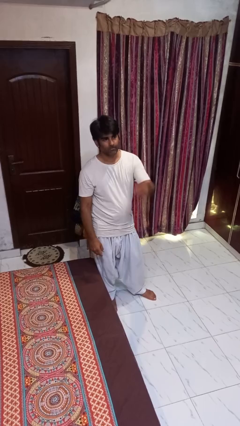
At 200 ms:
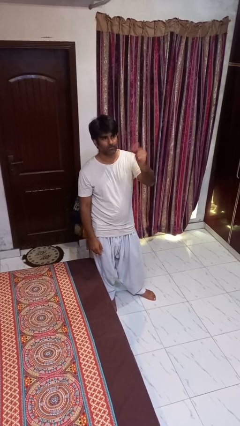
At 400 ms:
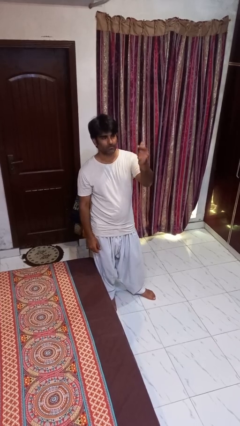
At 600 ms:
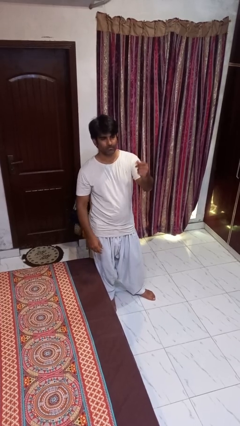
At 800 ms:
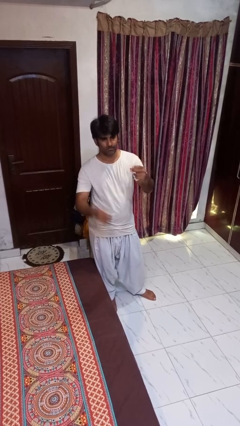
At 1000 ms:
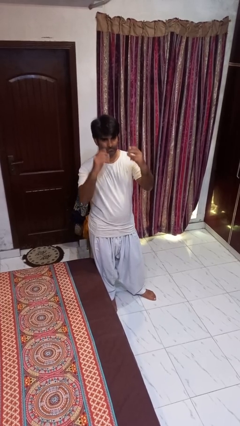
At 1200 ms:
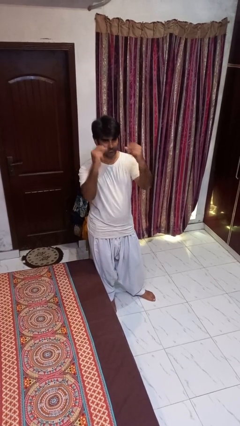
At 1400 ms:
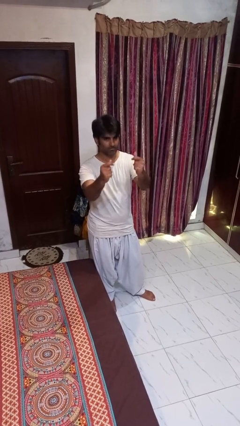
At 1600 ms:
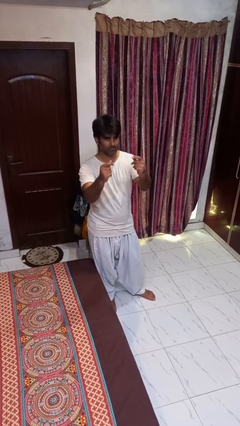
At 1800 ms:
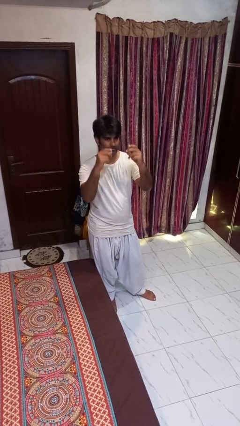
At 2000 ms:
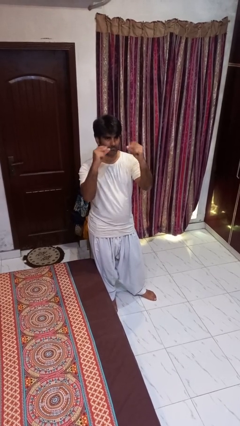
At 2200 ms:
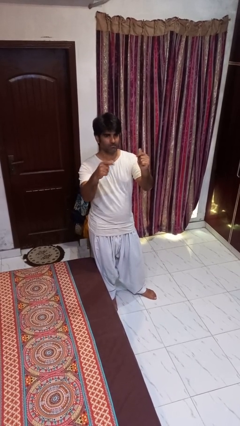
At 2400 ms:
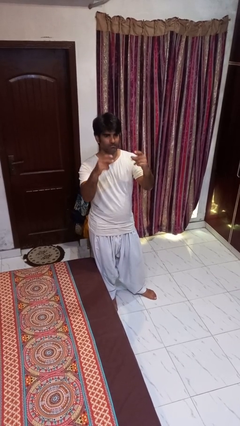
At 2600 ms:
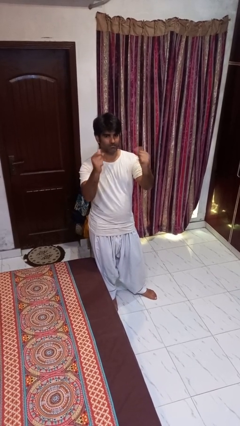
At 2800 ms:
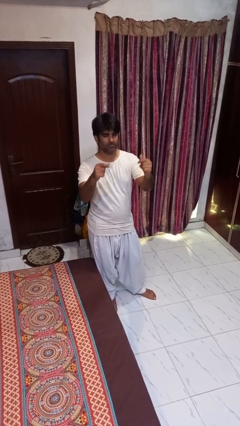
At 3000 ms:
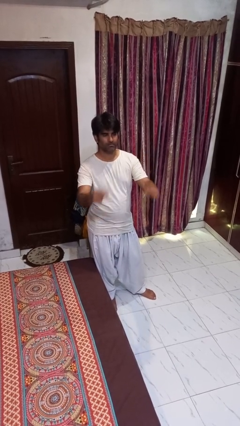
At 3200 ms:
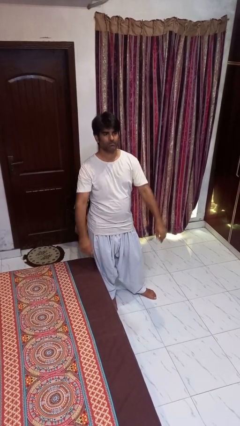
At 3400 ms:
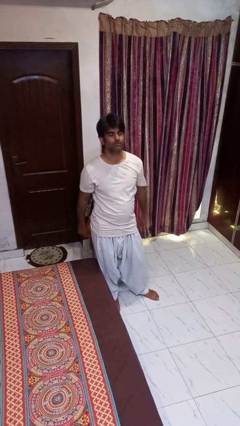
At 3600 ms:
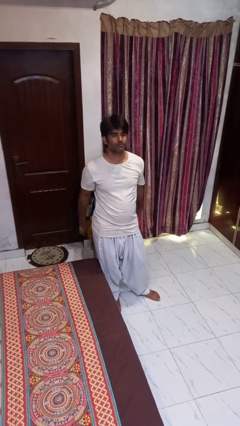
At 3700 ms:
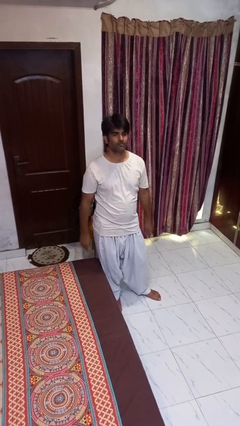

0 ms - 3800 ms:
person snaps fingers

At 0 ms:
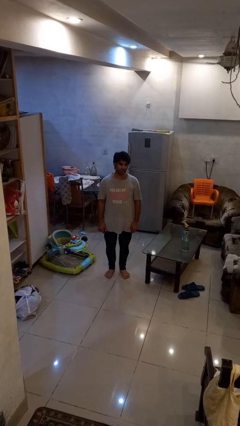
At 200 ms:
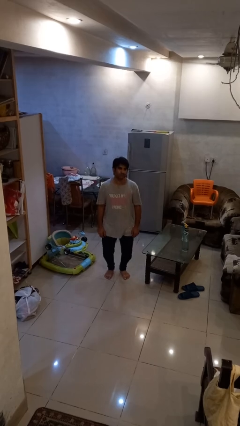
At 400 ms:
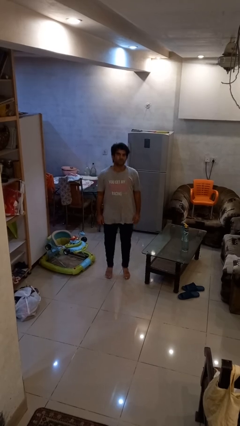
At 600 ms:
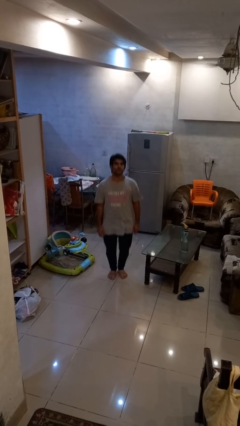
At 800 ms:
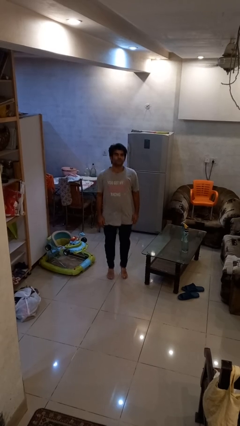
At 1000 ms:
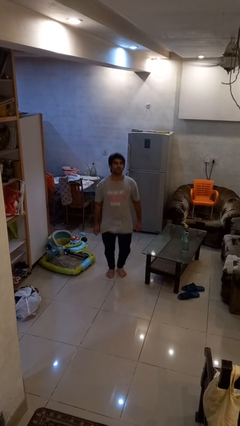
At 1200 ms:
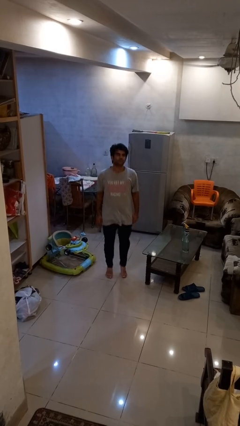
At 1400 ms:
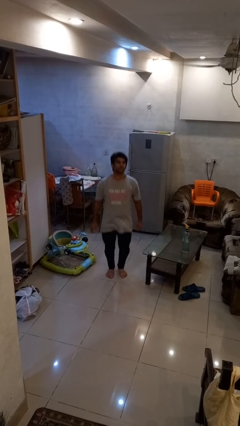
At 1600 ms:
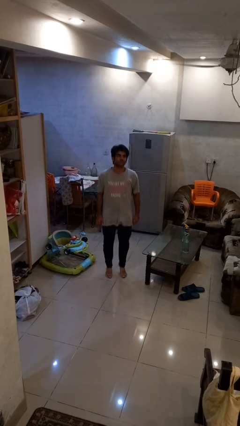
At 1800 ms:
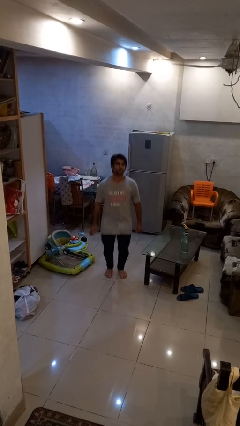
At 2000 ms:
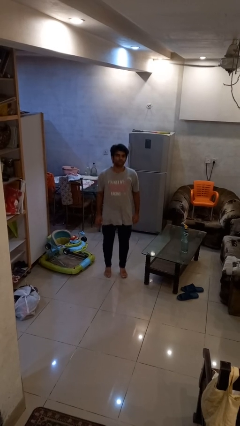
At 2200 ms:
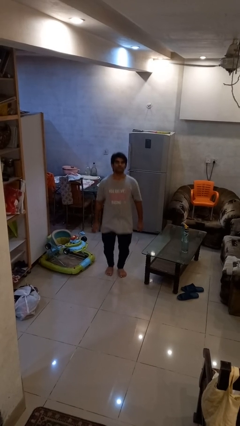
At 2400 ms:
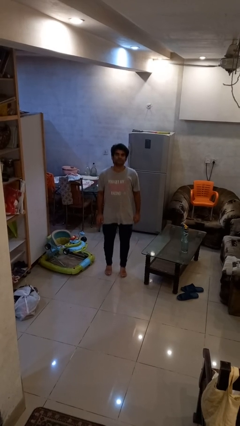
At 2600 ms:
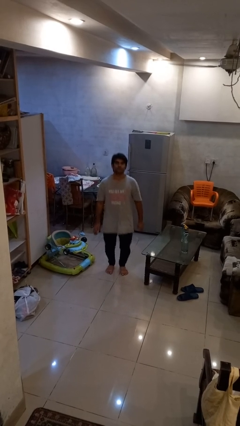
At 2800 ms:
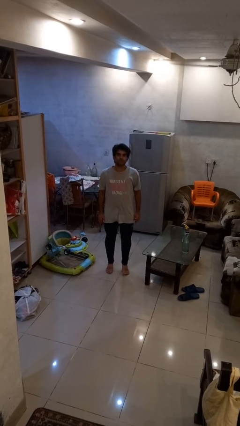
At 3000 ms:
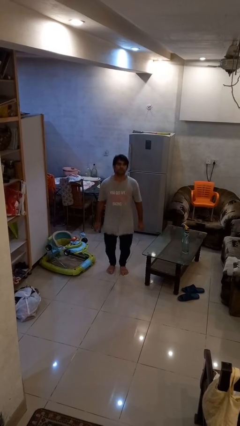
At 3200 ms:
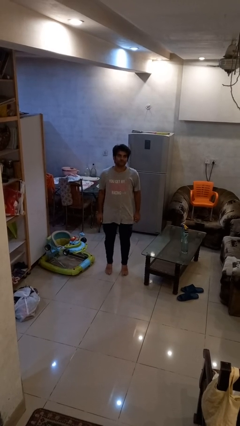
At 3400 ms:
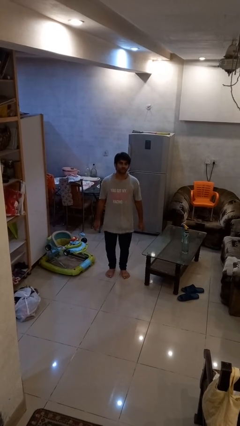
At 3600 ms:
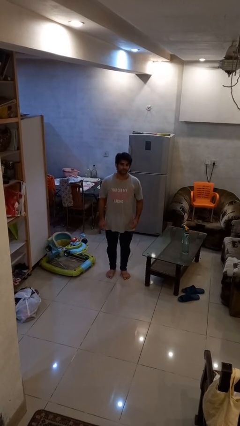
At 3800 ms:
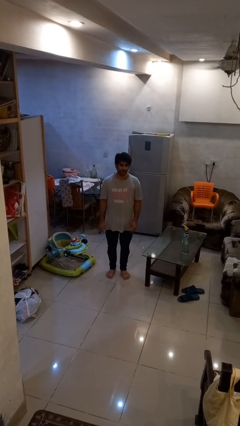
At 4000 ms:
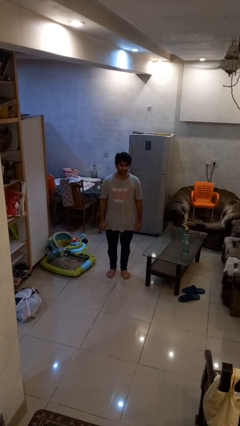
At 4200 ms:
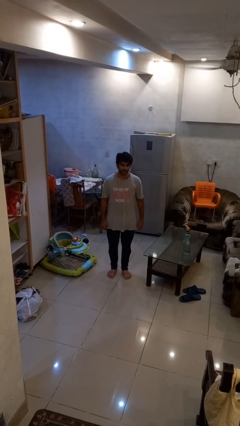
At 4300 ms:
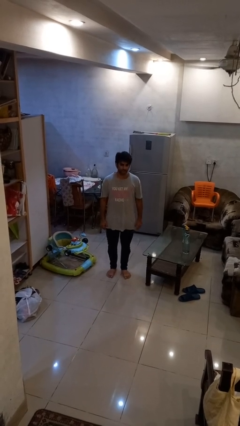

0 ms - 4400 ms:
person jumps

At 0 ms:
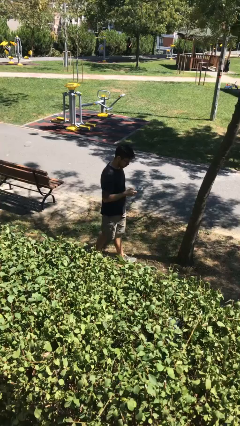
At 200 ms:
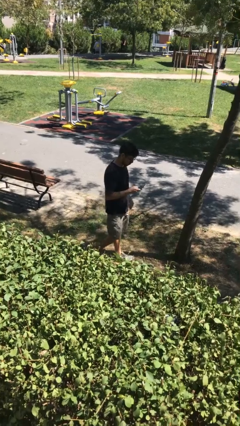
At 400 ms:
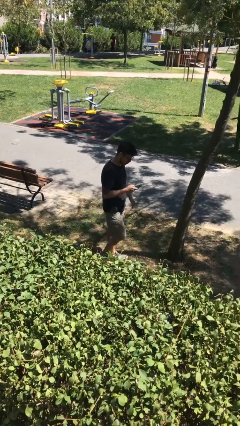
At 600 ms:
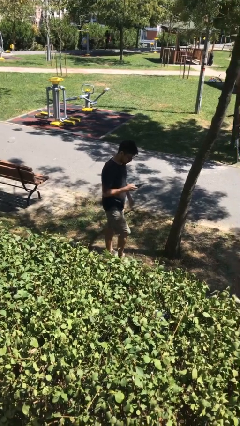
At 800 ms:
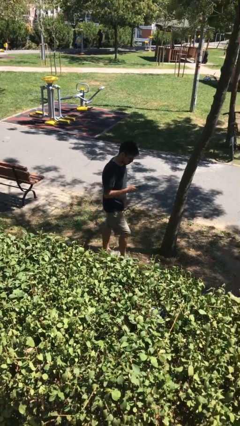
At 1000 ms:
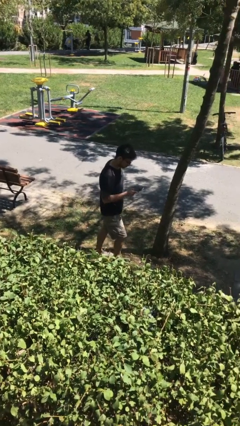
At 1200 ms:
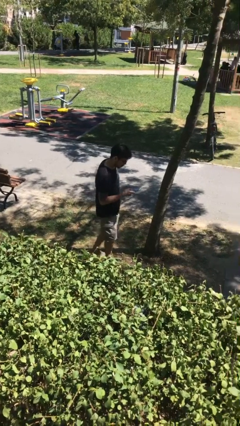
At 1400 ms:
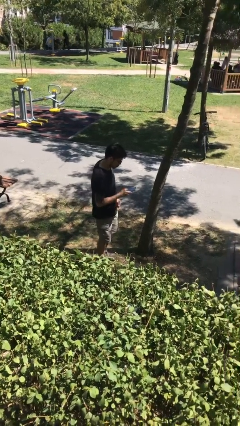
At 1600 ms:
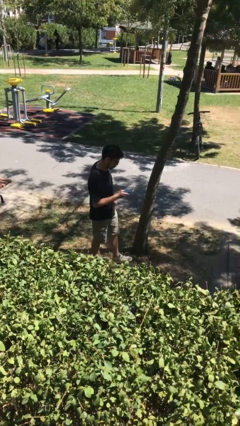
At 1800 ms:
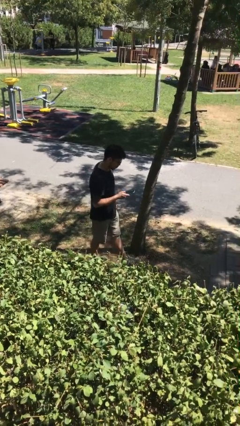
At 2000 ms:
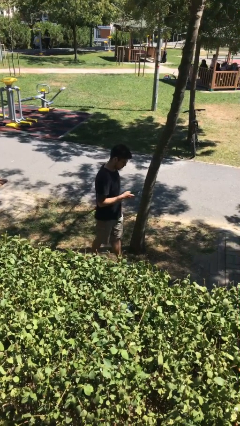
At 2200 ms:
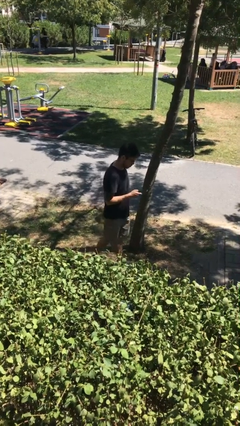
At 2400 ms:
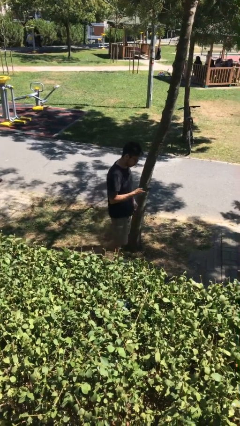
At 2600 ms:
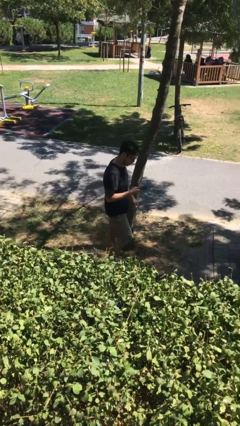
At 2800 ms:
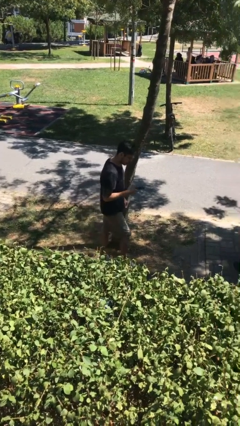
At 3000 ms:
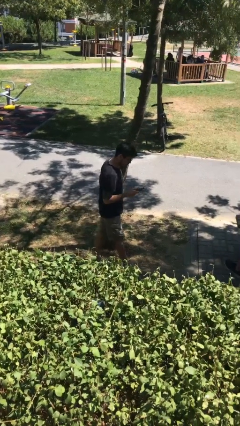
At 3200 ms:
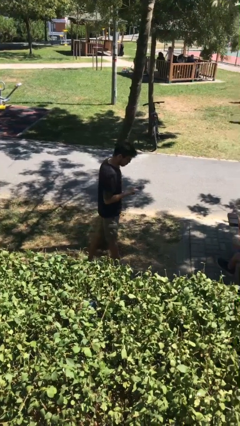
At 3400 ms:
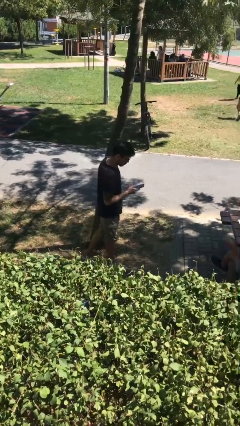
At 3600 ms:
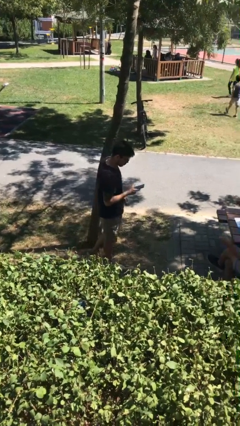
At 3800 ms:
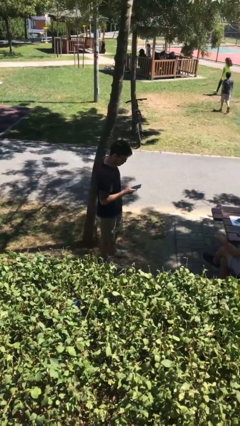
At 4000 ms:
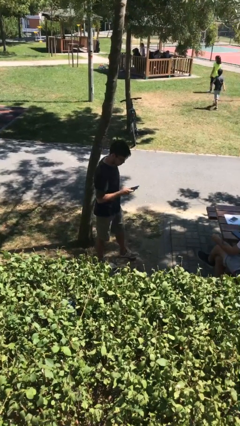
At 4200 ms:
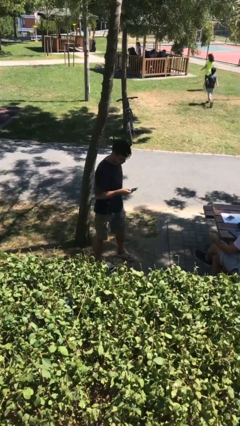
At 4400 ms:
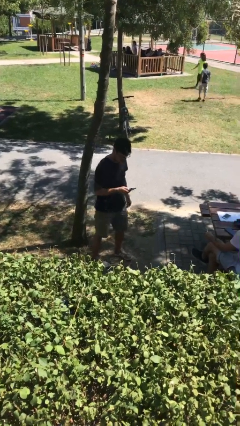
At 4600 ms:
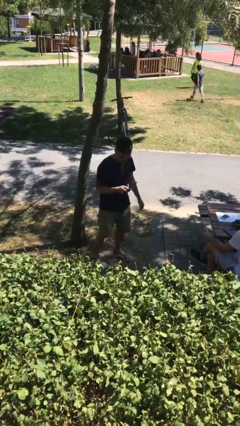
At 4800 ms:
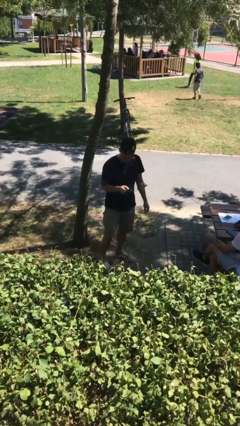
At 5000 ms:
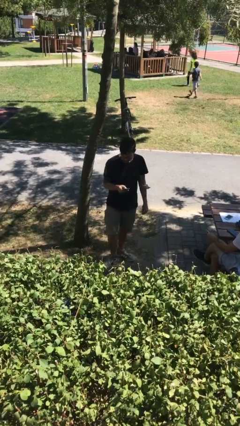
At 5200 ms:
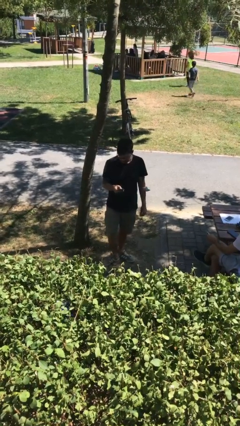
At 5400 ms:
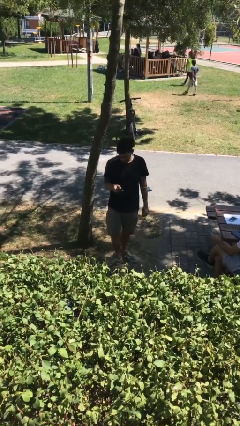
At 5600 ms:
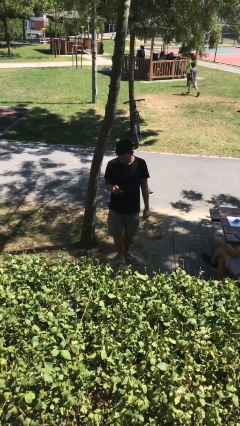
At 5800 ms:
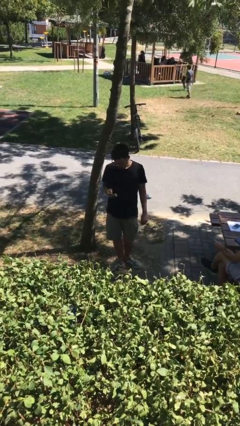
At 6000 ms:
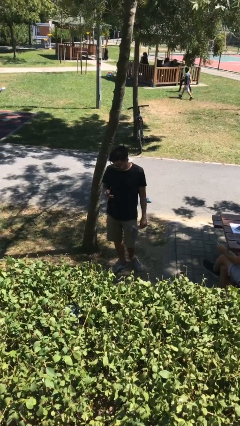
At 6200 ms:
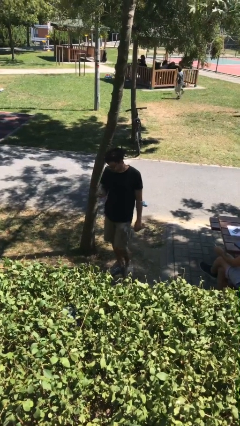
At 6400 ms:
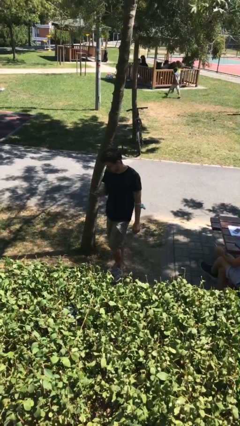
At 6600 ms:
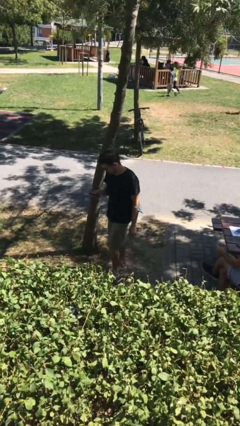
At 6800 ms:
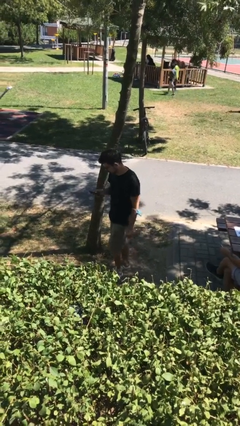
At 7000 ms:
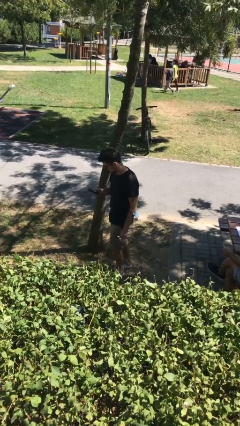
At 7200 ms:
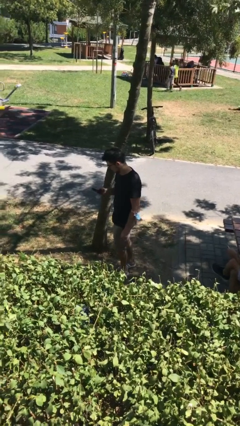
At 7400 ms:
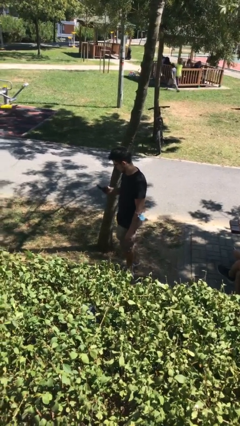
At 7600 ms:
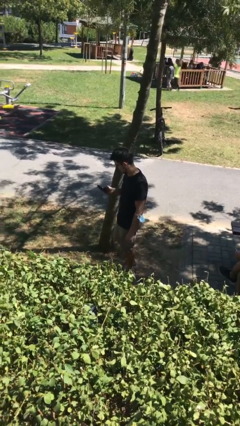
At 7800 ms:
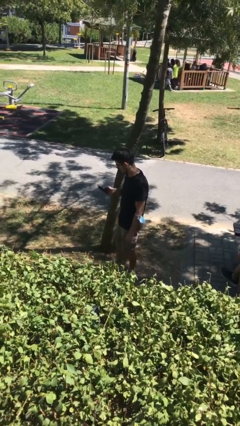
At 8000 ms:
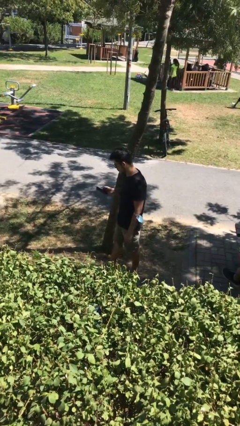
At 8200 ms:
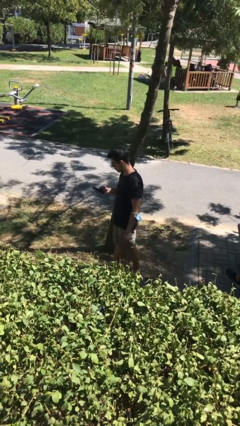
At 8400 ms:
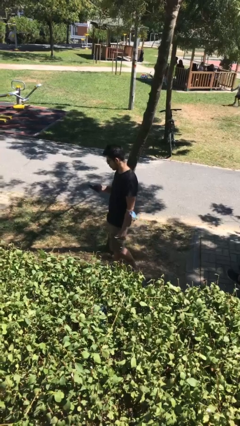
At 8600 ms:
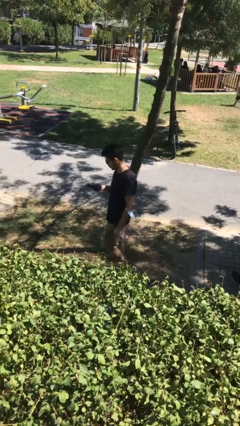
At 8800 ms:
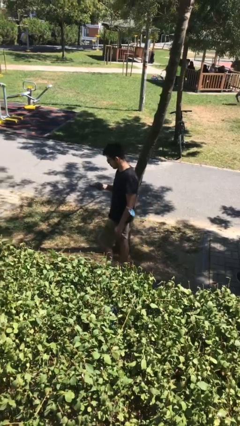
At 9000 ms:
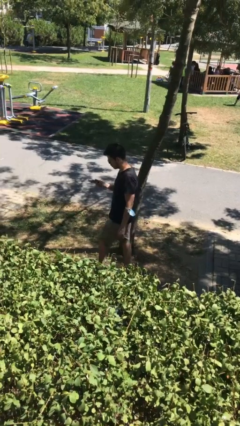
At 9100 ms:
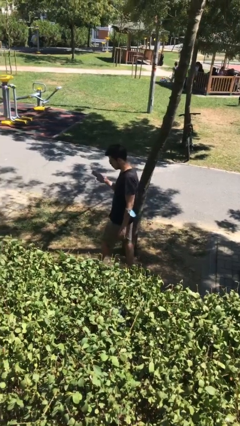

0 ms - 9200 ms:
person texts on phone

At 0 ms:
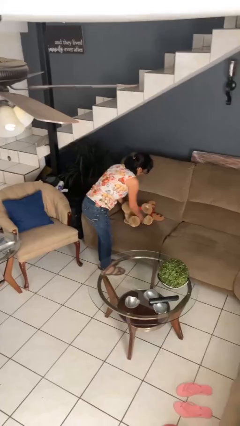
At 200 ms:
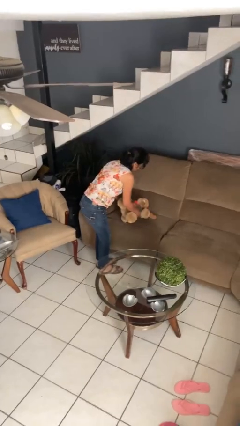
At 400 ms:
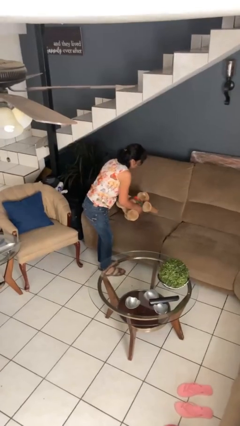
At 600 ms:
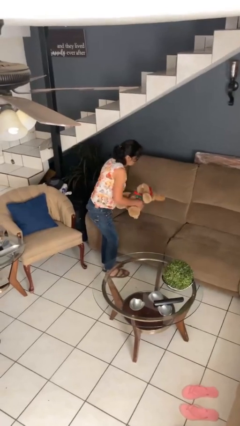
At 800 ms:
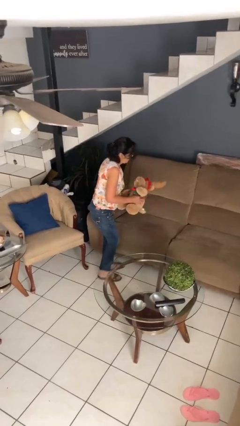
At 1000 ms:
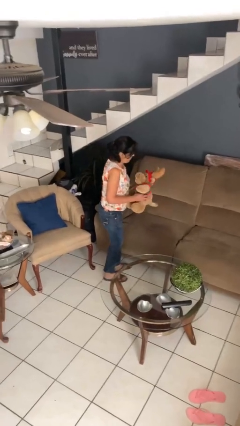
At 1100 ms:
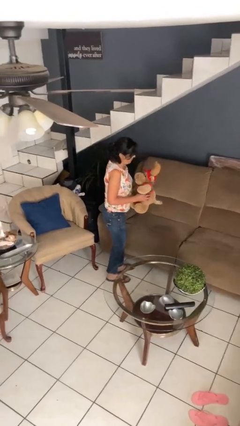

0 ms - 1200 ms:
person picks up object from couch
